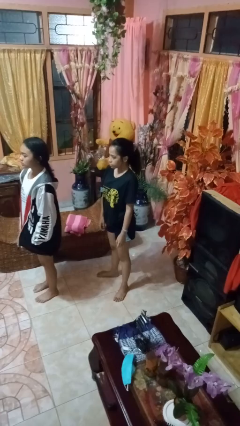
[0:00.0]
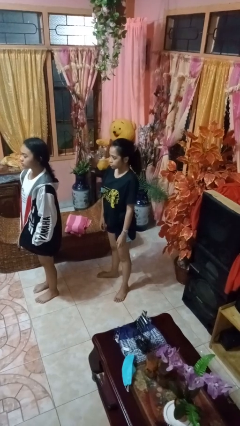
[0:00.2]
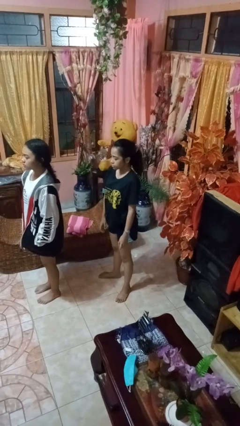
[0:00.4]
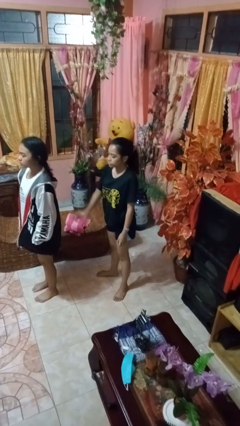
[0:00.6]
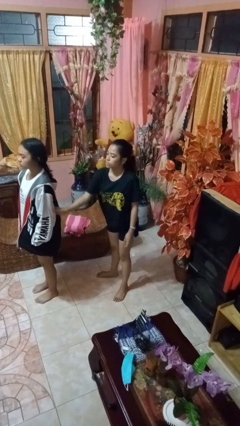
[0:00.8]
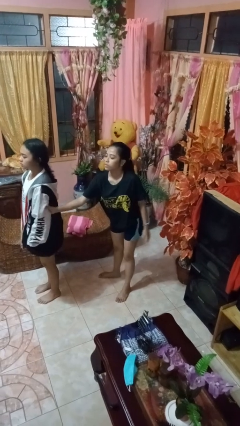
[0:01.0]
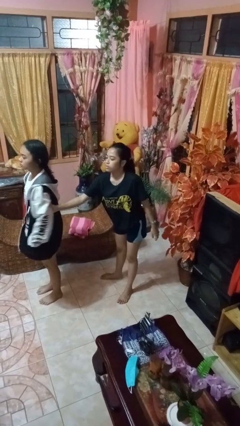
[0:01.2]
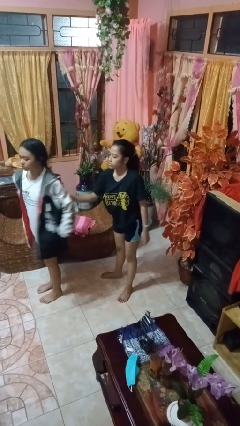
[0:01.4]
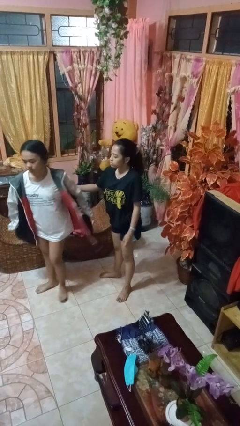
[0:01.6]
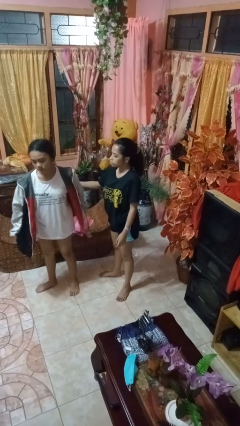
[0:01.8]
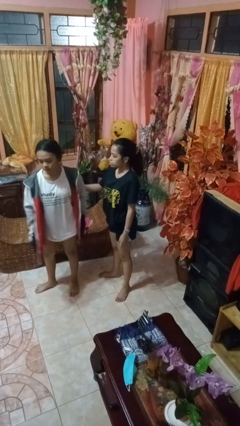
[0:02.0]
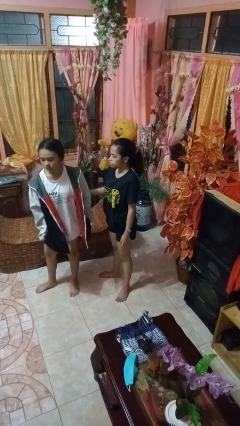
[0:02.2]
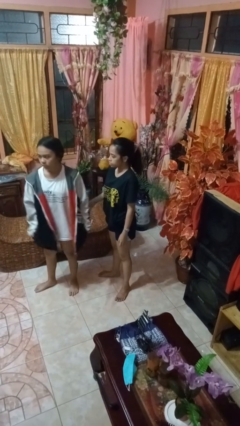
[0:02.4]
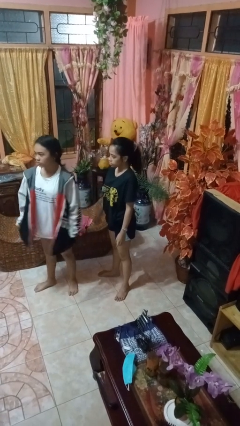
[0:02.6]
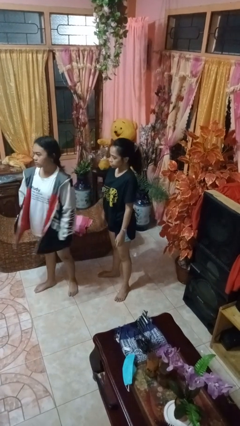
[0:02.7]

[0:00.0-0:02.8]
person grabs person by bicep

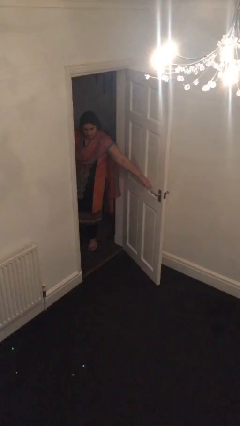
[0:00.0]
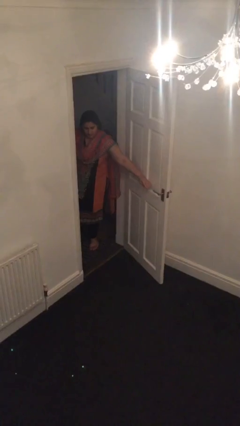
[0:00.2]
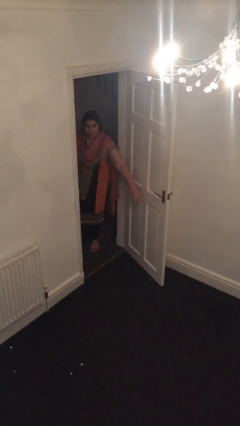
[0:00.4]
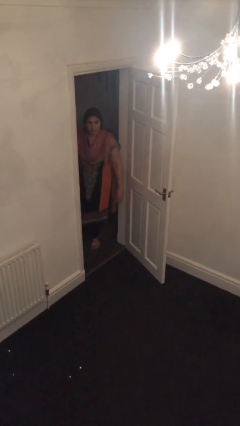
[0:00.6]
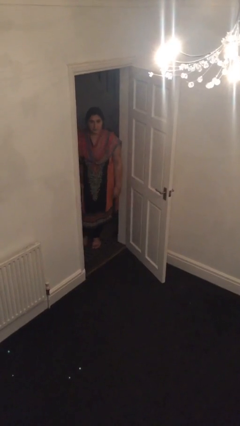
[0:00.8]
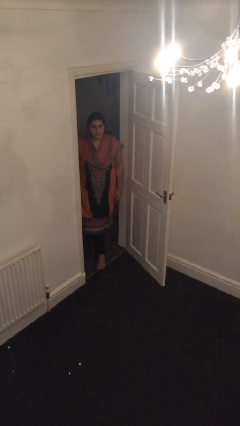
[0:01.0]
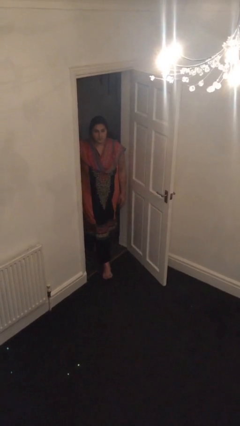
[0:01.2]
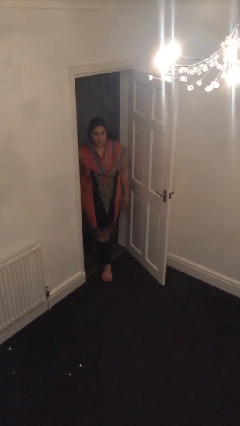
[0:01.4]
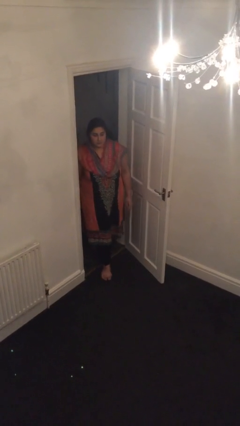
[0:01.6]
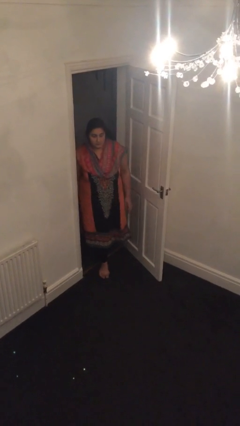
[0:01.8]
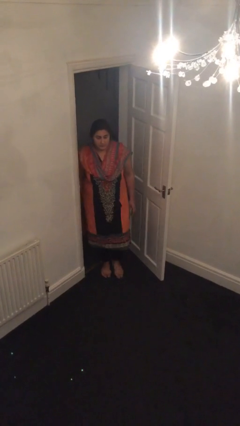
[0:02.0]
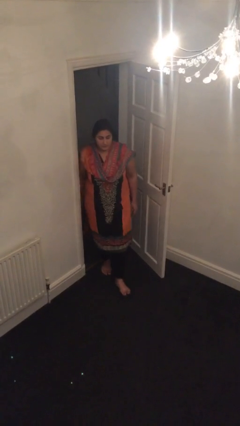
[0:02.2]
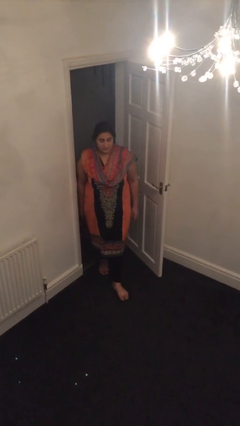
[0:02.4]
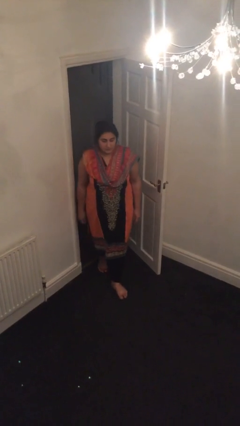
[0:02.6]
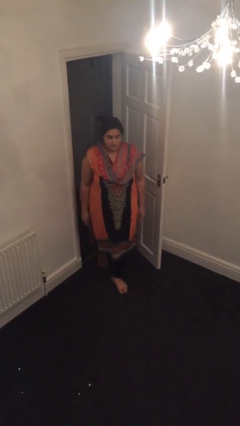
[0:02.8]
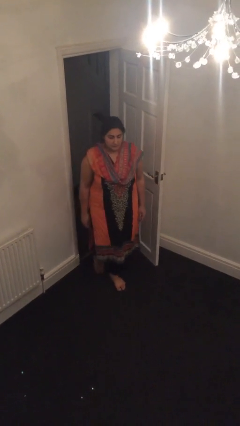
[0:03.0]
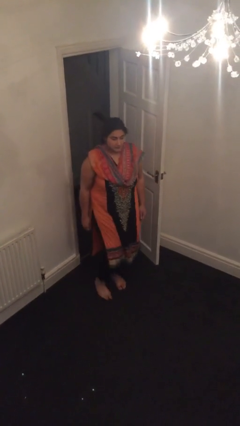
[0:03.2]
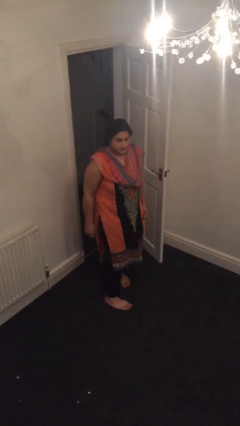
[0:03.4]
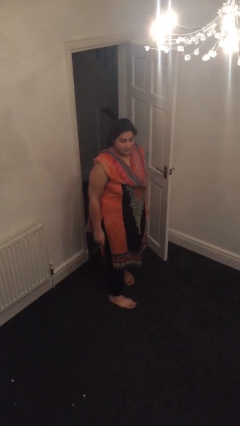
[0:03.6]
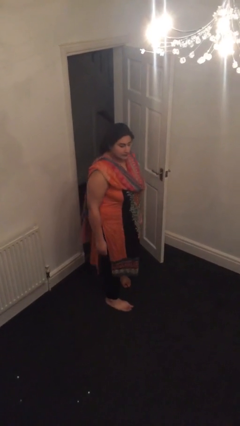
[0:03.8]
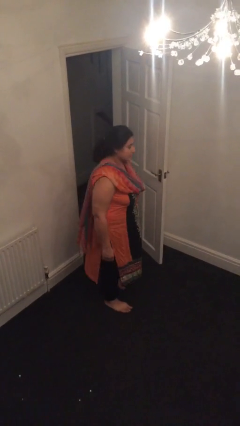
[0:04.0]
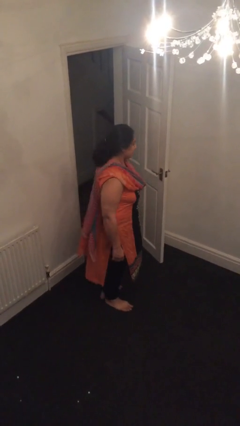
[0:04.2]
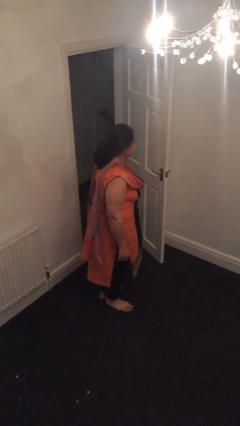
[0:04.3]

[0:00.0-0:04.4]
person enters scene through structure

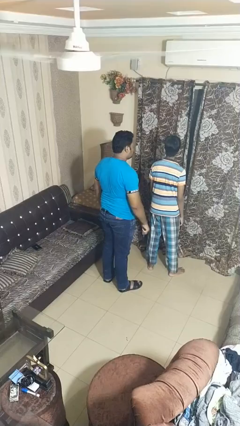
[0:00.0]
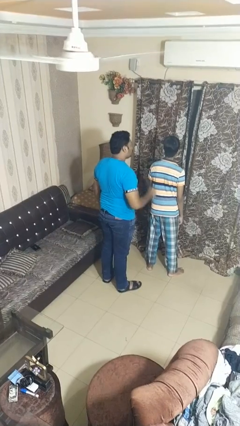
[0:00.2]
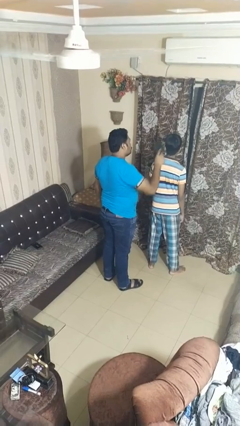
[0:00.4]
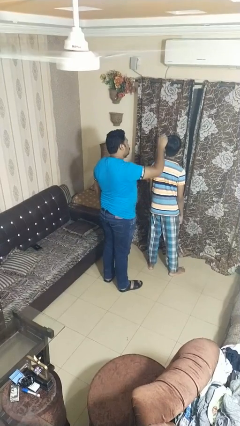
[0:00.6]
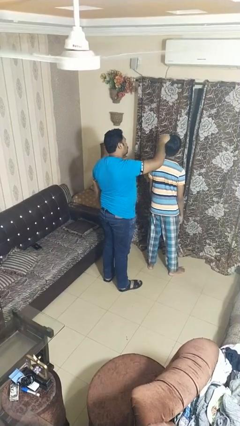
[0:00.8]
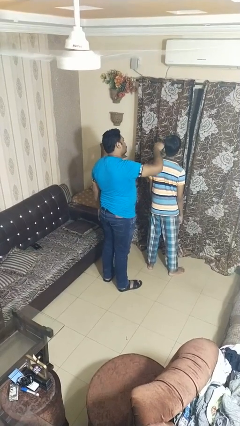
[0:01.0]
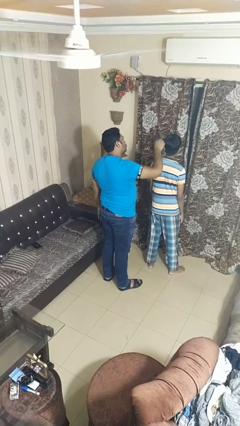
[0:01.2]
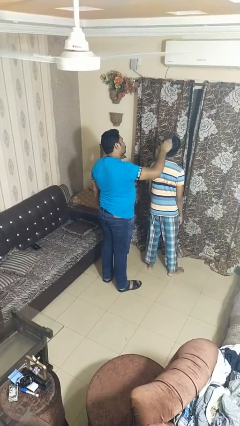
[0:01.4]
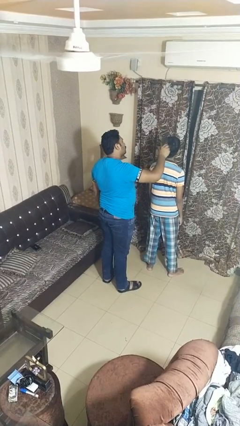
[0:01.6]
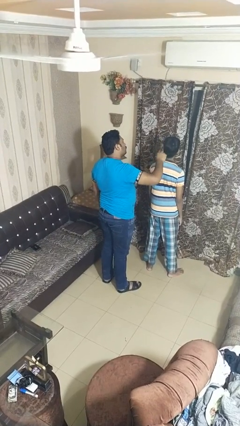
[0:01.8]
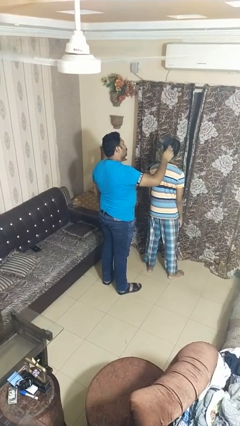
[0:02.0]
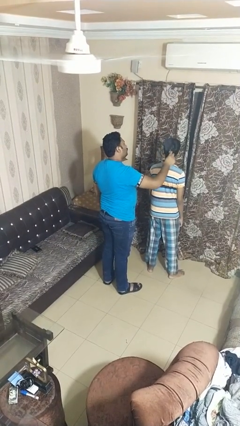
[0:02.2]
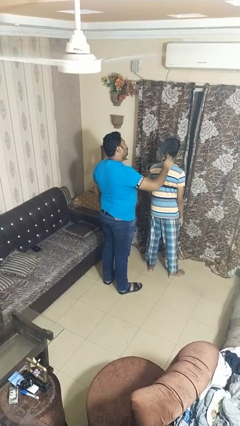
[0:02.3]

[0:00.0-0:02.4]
person brushes hair of person

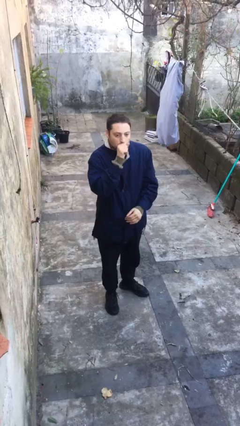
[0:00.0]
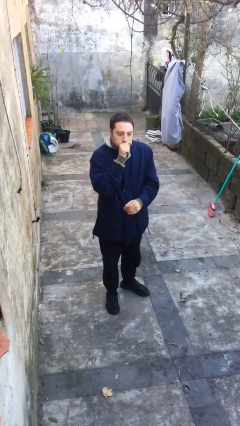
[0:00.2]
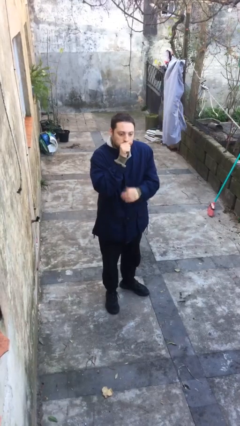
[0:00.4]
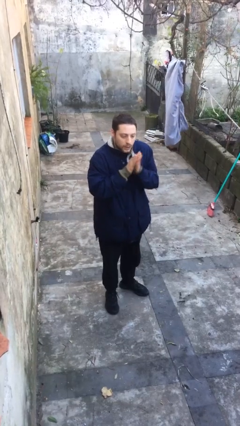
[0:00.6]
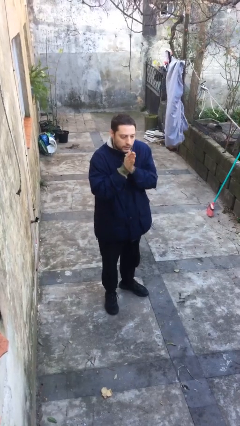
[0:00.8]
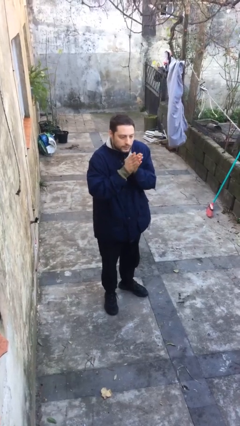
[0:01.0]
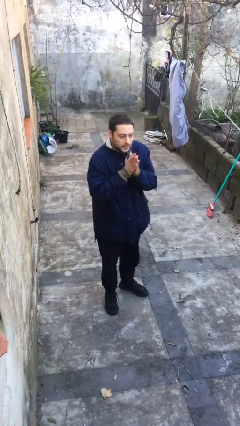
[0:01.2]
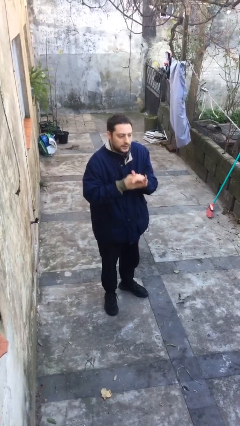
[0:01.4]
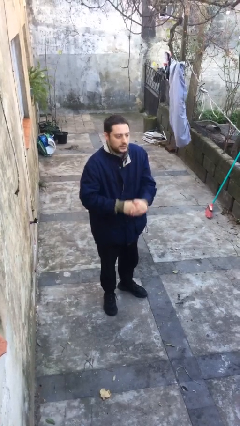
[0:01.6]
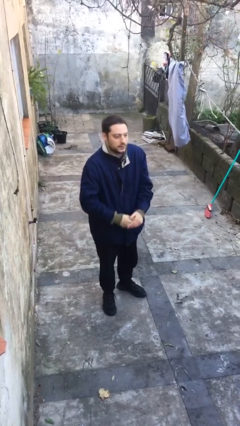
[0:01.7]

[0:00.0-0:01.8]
person blows into hands

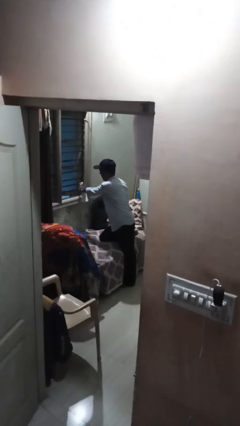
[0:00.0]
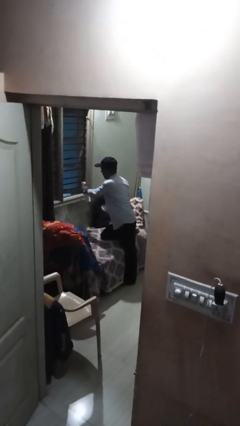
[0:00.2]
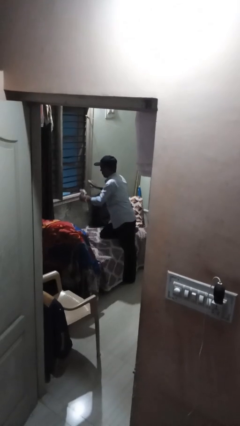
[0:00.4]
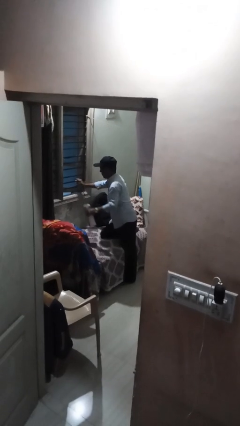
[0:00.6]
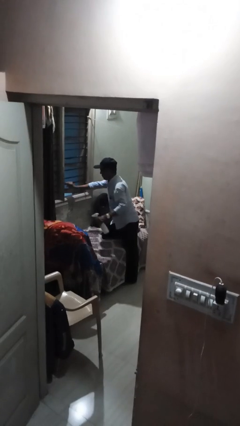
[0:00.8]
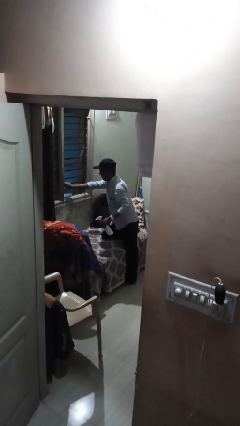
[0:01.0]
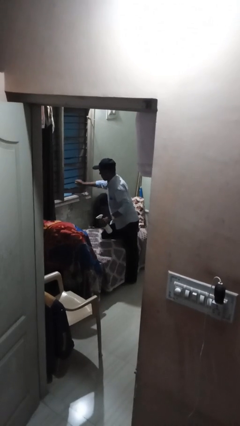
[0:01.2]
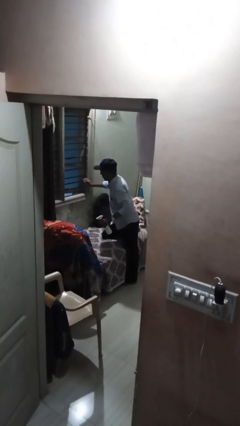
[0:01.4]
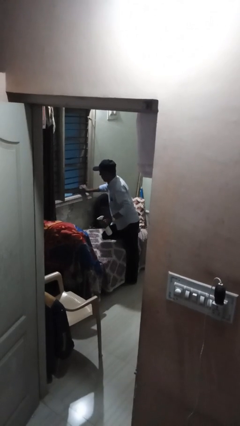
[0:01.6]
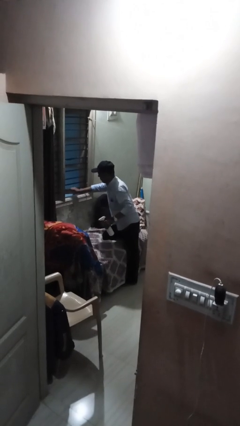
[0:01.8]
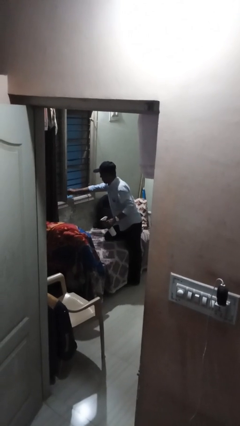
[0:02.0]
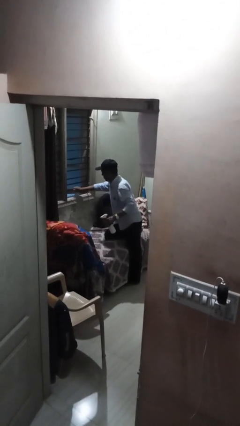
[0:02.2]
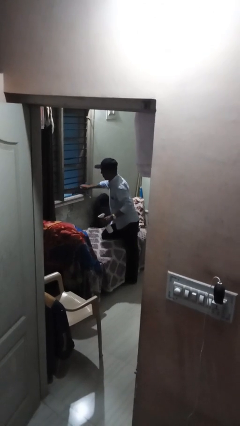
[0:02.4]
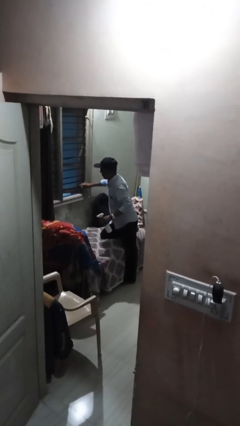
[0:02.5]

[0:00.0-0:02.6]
person washes window

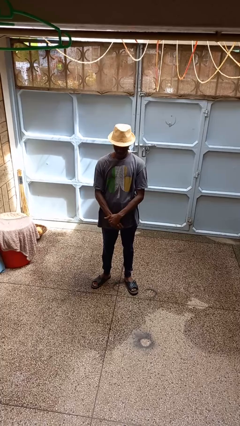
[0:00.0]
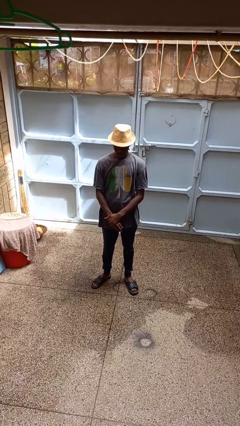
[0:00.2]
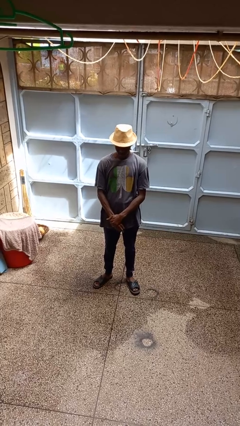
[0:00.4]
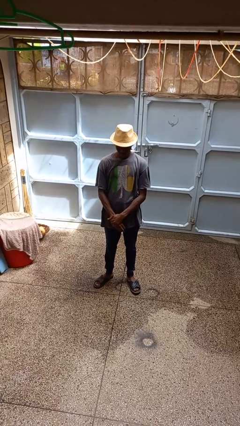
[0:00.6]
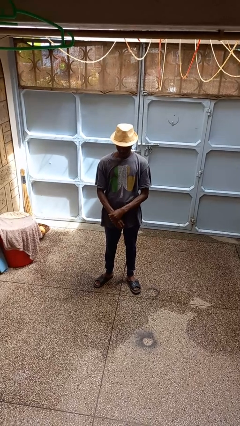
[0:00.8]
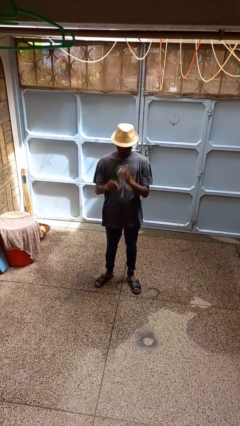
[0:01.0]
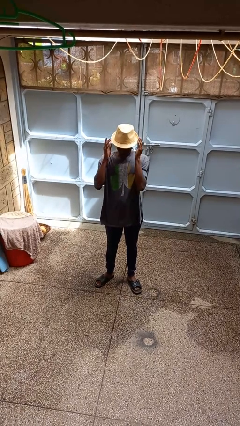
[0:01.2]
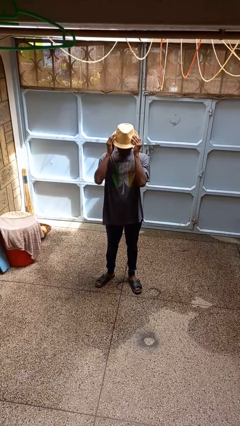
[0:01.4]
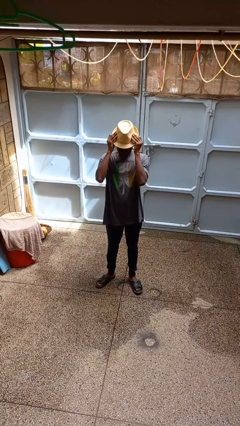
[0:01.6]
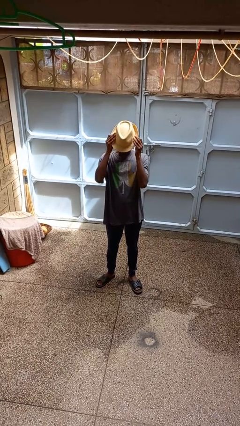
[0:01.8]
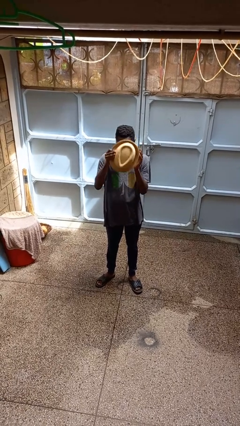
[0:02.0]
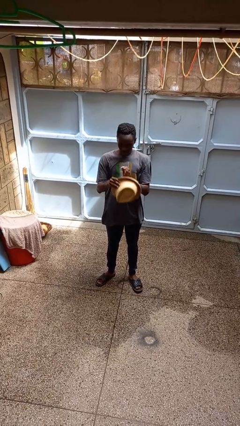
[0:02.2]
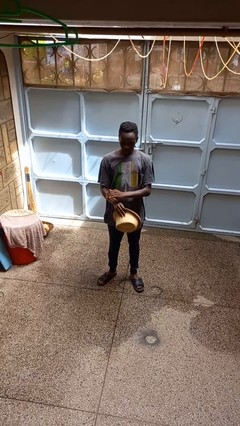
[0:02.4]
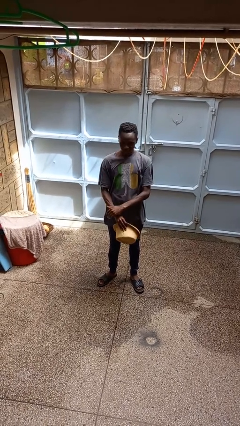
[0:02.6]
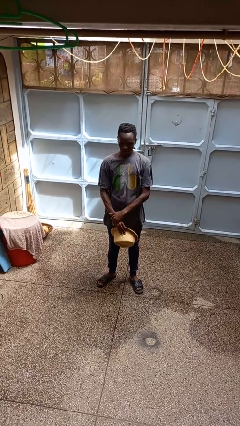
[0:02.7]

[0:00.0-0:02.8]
person takes off hat

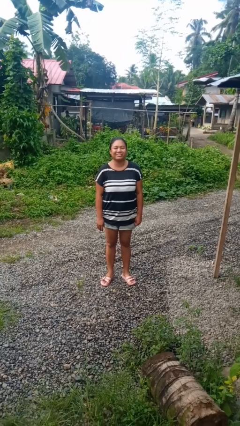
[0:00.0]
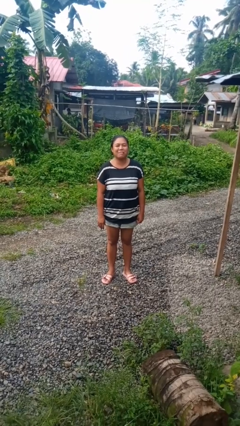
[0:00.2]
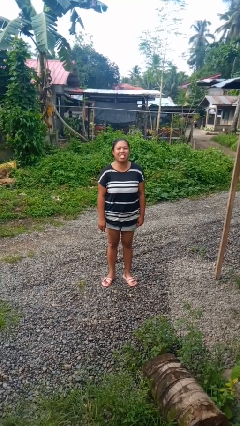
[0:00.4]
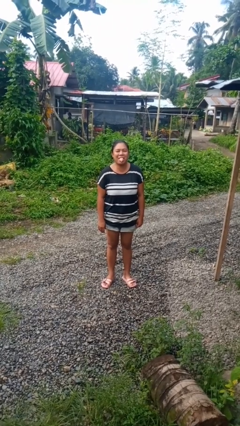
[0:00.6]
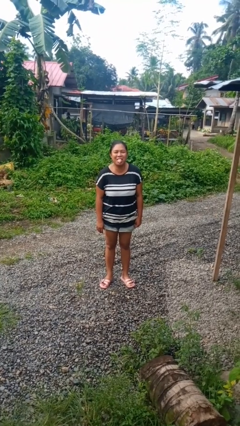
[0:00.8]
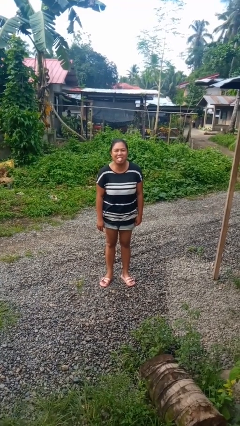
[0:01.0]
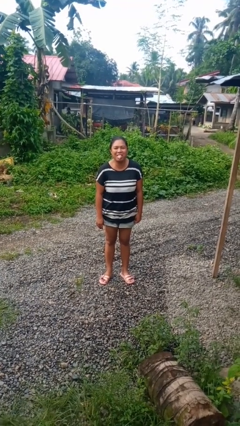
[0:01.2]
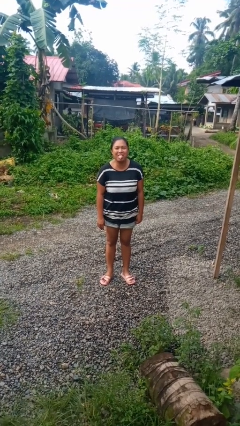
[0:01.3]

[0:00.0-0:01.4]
person sticks out tongue
